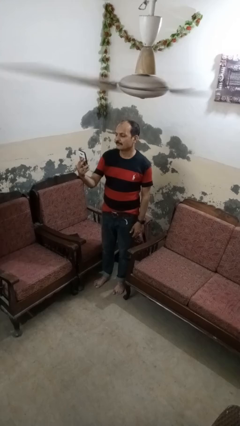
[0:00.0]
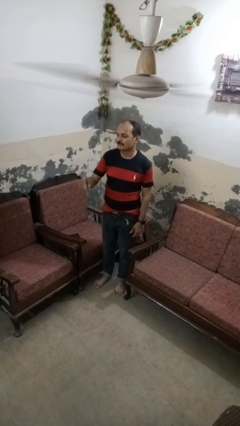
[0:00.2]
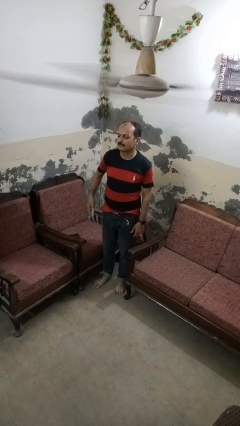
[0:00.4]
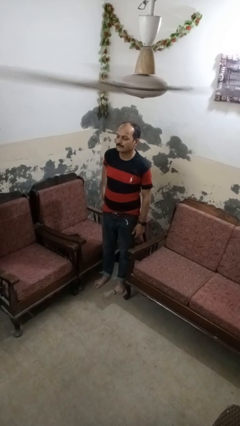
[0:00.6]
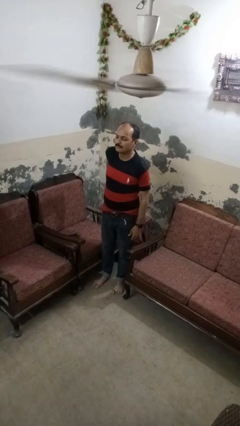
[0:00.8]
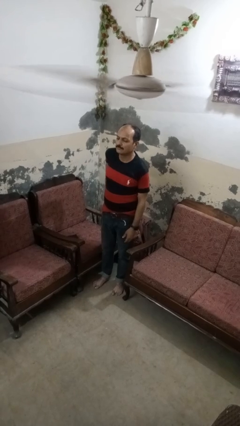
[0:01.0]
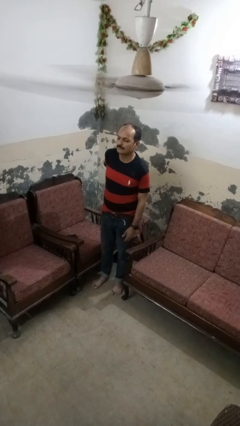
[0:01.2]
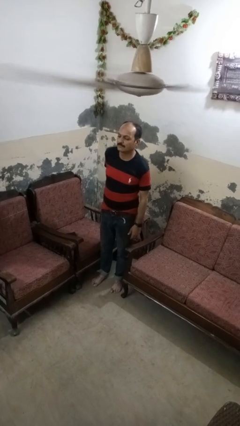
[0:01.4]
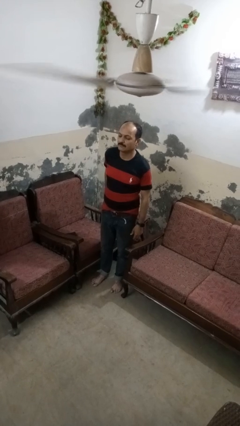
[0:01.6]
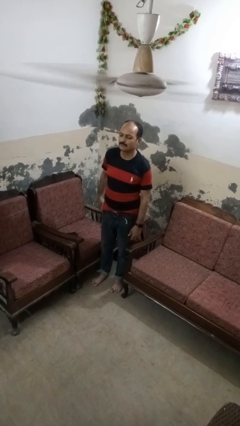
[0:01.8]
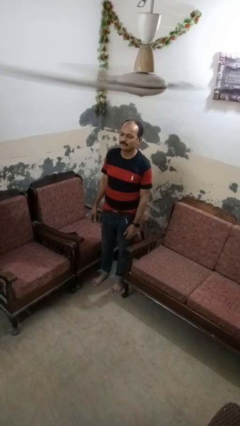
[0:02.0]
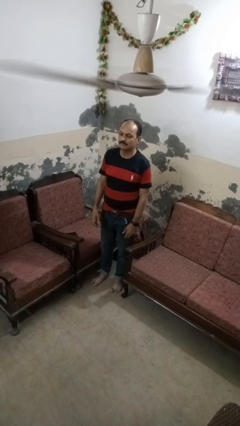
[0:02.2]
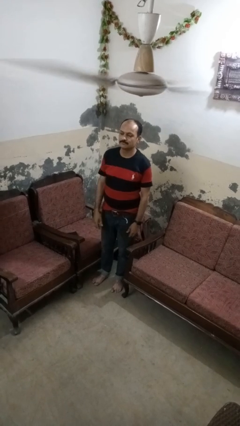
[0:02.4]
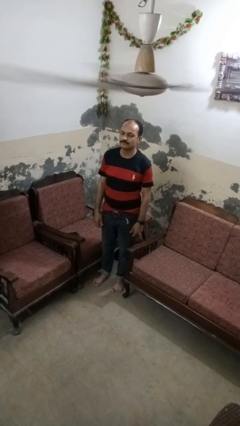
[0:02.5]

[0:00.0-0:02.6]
person puts phone into pocket

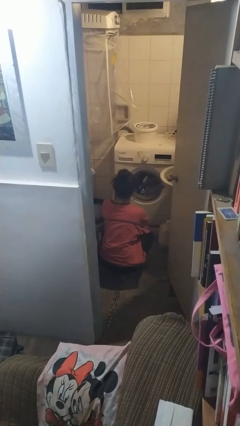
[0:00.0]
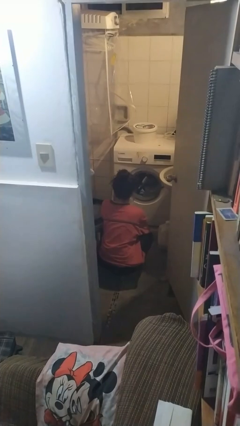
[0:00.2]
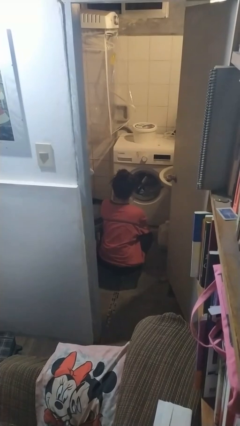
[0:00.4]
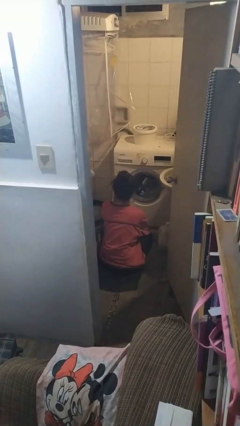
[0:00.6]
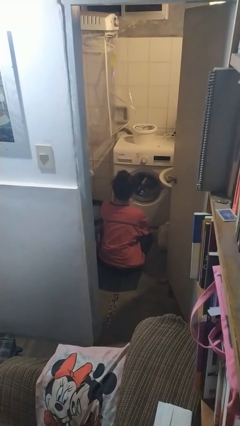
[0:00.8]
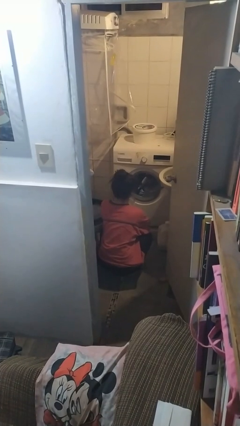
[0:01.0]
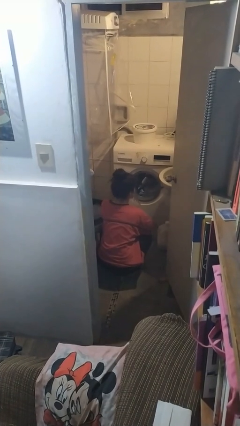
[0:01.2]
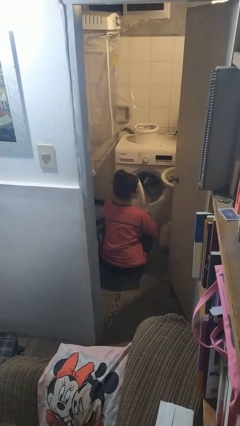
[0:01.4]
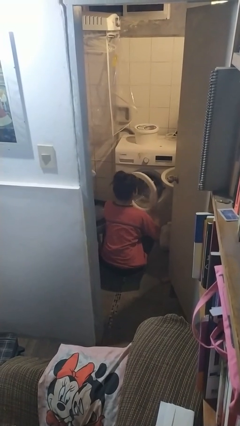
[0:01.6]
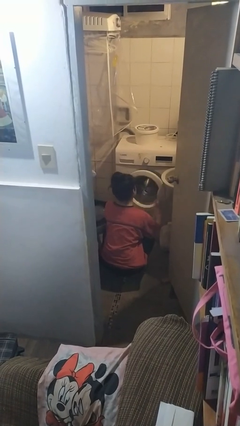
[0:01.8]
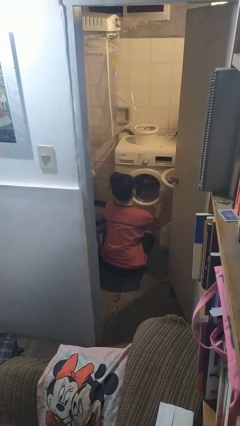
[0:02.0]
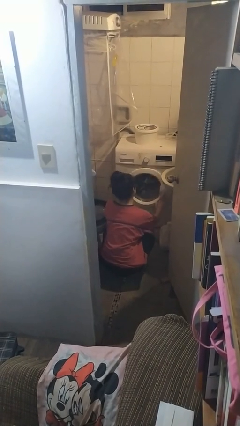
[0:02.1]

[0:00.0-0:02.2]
person closes clothes washer

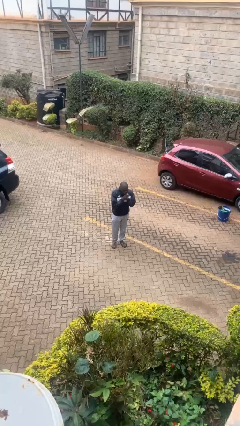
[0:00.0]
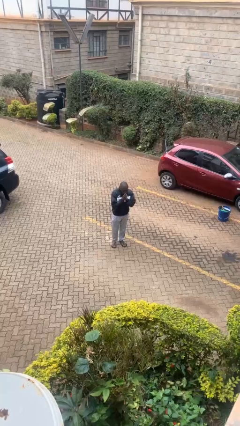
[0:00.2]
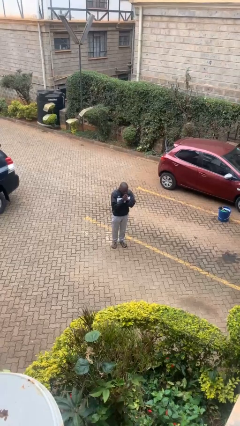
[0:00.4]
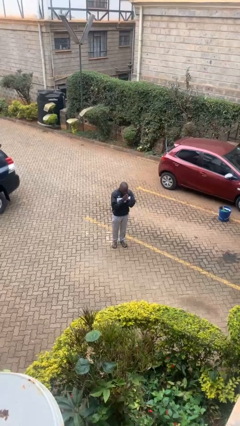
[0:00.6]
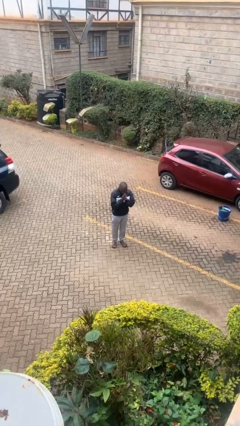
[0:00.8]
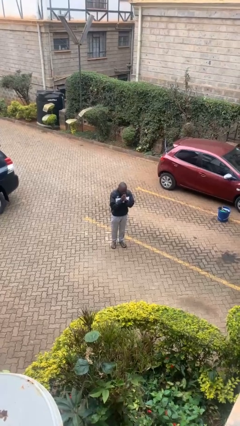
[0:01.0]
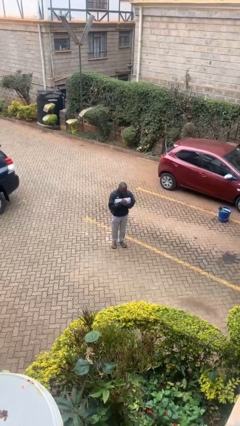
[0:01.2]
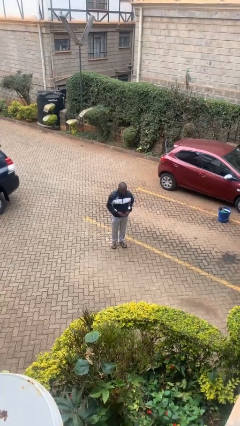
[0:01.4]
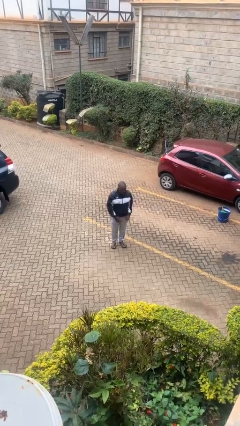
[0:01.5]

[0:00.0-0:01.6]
person blows into hands

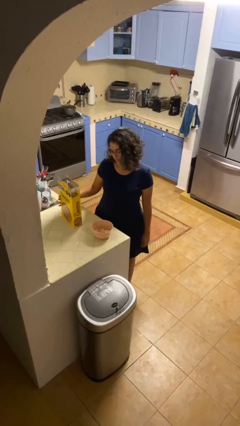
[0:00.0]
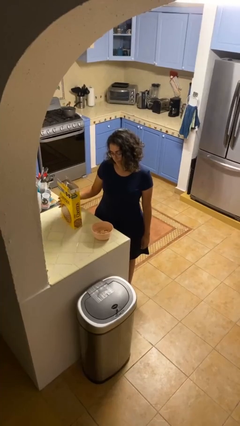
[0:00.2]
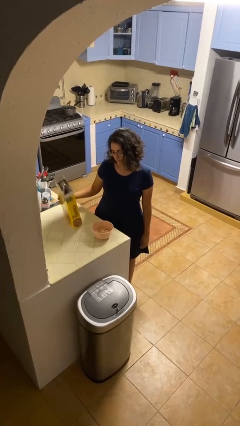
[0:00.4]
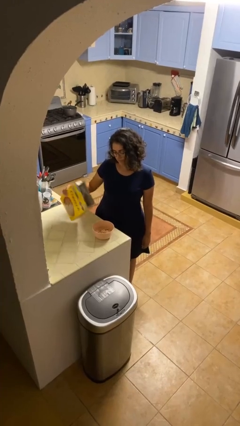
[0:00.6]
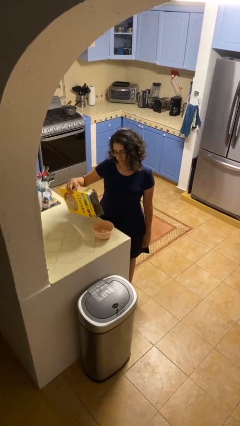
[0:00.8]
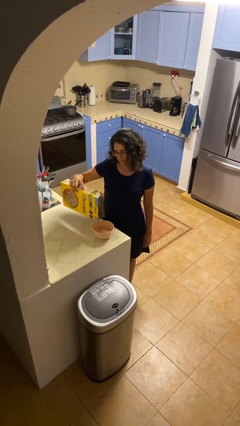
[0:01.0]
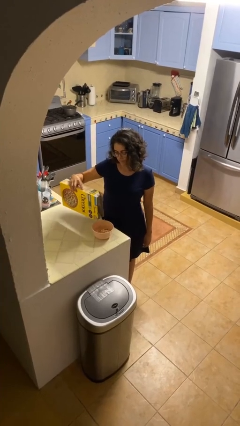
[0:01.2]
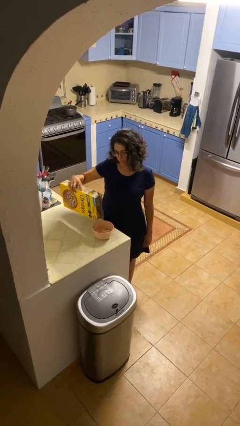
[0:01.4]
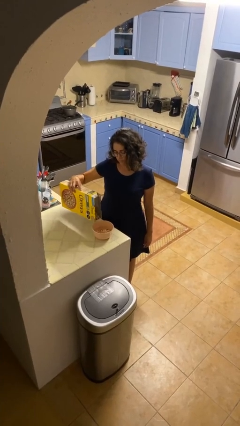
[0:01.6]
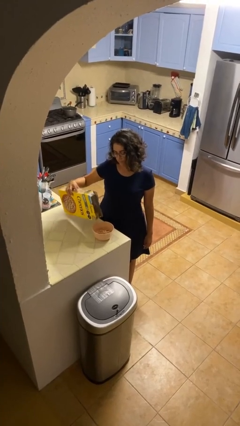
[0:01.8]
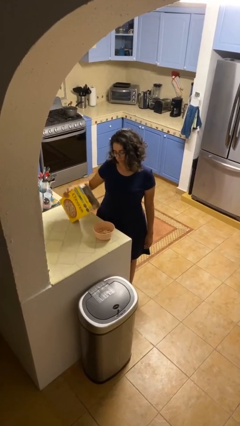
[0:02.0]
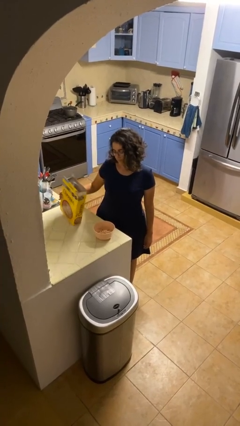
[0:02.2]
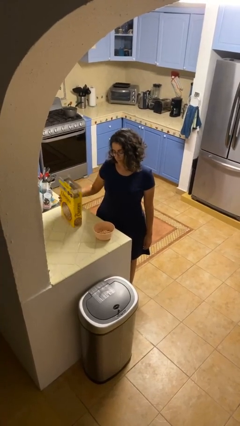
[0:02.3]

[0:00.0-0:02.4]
person pours into bowl

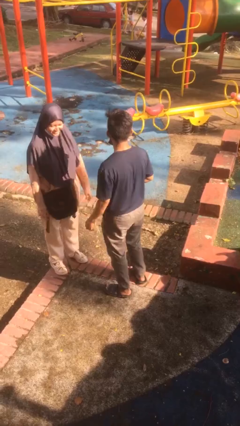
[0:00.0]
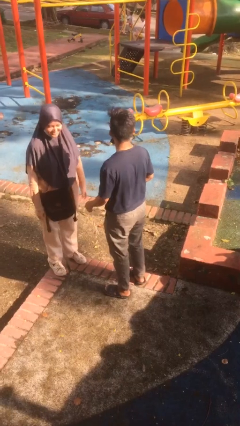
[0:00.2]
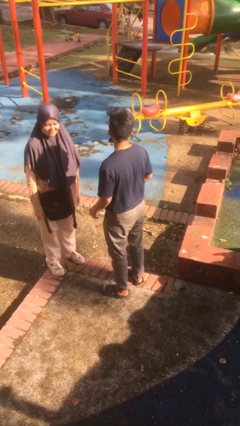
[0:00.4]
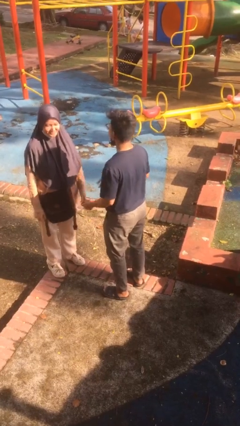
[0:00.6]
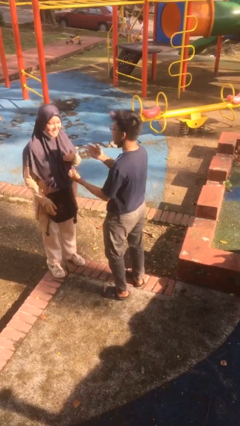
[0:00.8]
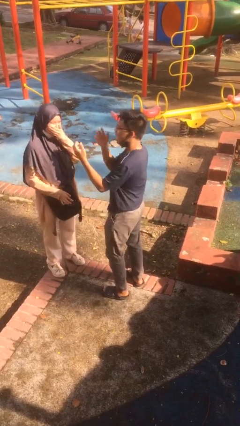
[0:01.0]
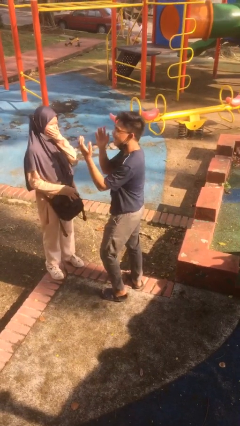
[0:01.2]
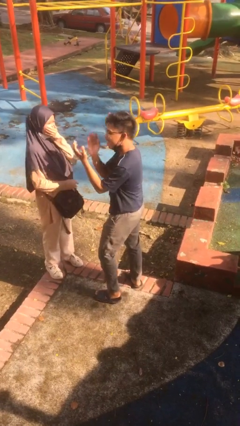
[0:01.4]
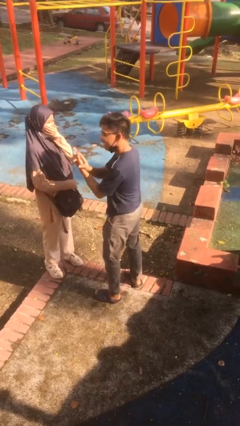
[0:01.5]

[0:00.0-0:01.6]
person laughs with person

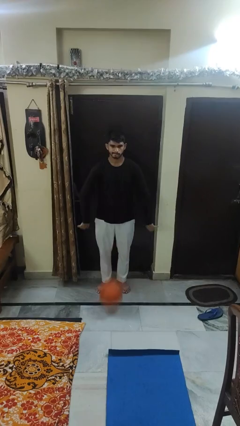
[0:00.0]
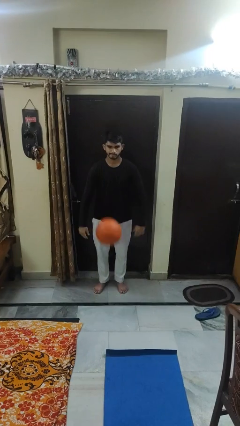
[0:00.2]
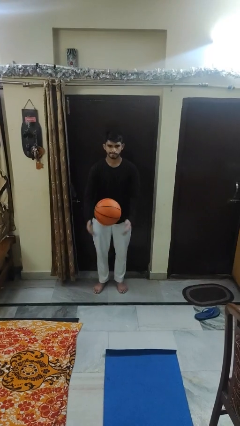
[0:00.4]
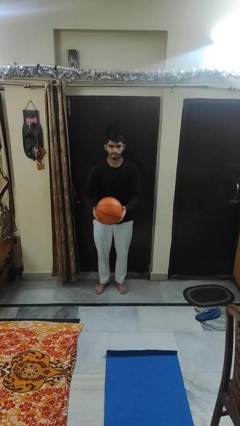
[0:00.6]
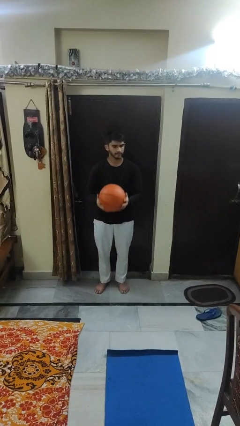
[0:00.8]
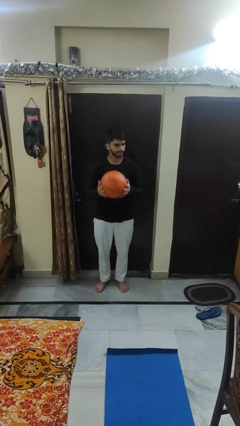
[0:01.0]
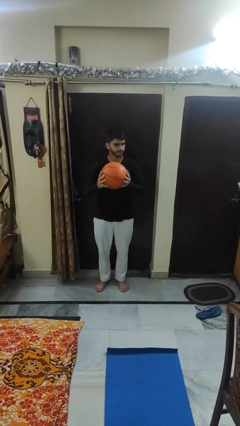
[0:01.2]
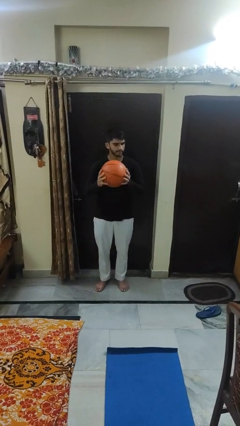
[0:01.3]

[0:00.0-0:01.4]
person bounces ball on floor

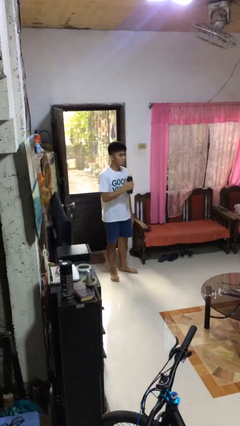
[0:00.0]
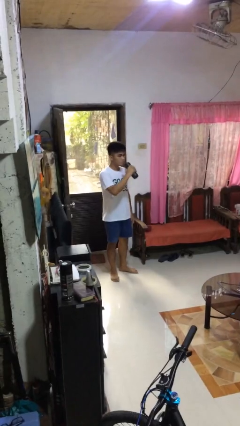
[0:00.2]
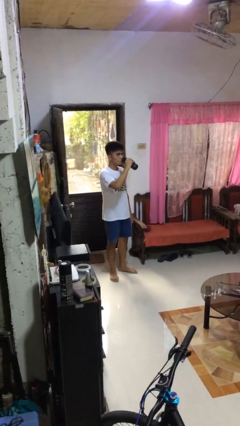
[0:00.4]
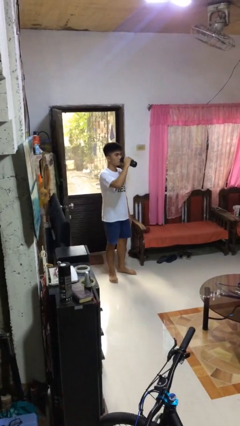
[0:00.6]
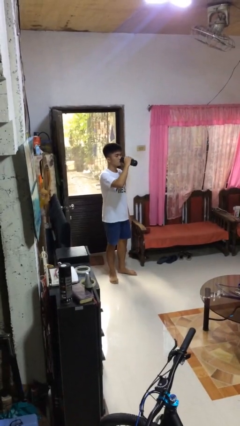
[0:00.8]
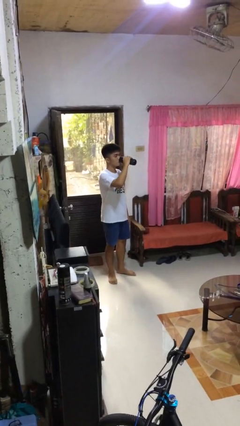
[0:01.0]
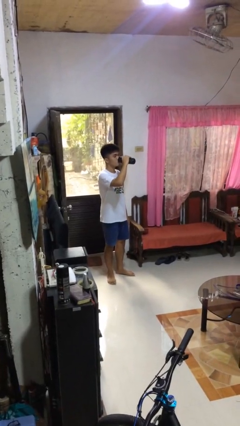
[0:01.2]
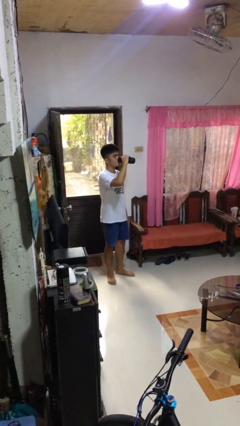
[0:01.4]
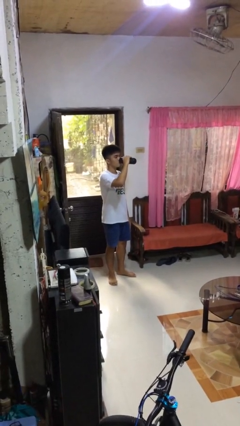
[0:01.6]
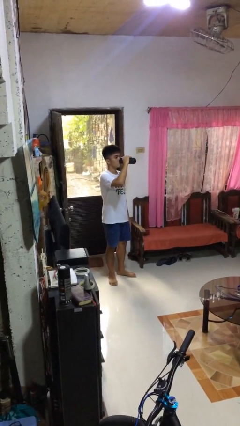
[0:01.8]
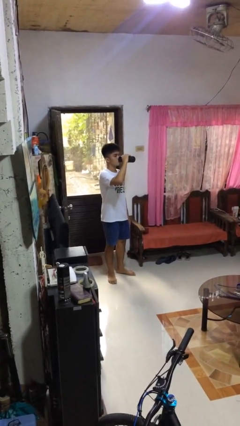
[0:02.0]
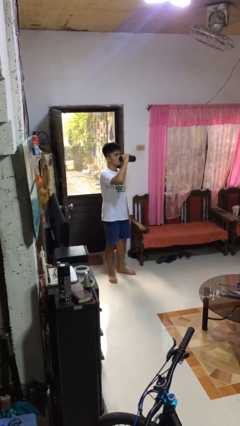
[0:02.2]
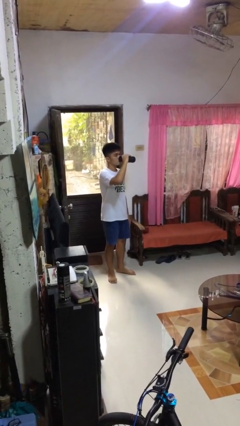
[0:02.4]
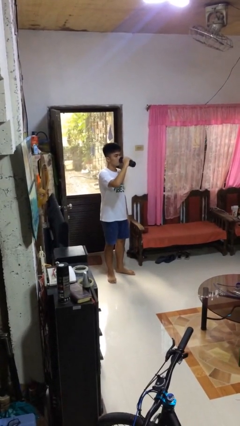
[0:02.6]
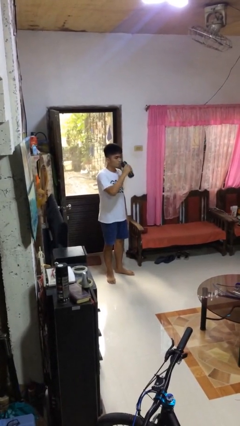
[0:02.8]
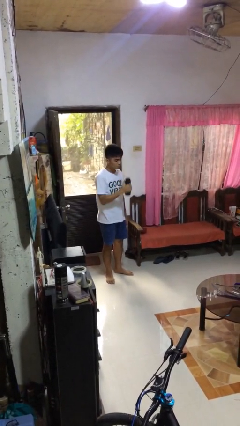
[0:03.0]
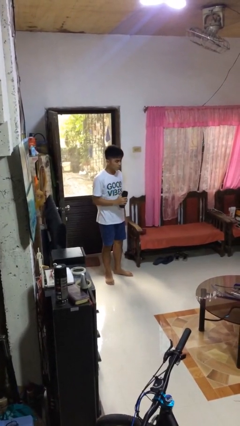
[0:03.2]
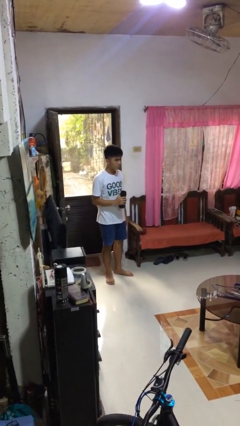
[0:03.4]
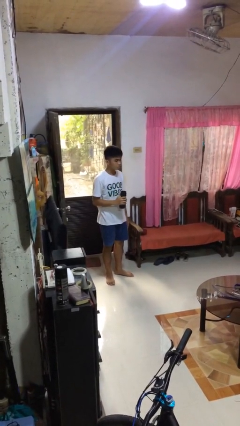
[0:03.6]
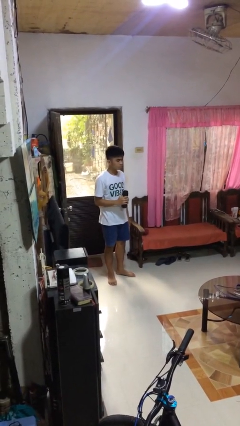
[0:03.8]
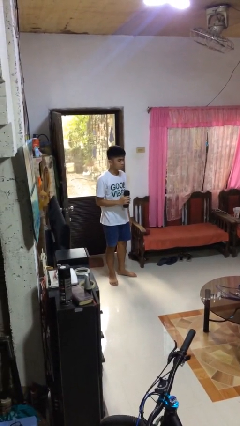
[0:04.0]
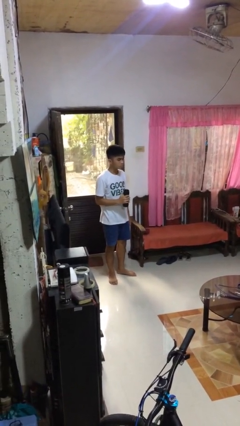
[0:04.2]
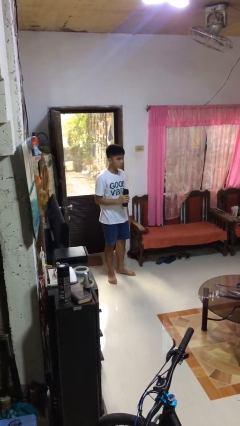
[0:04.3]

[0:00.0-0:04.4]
person drinks from bottle

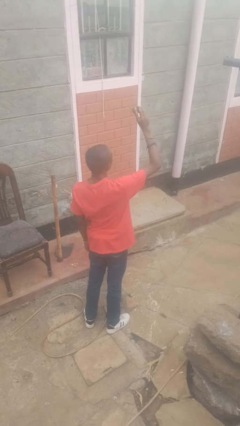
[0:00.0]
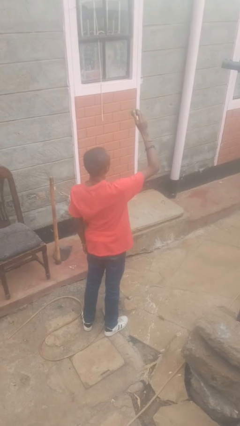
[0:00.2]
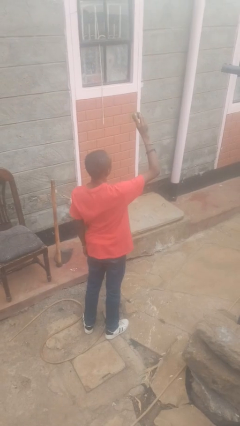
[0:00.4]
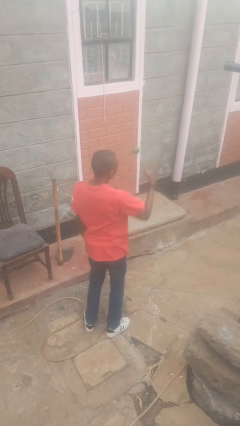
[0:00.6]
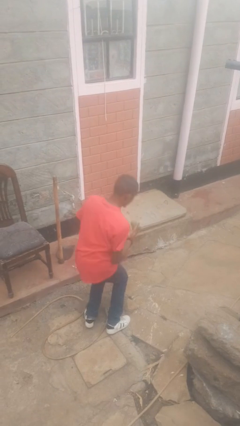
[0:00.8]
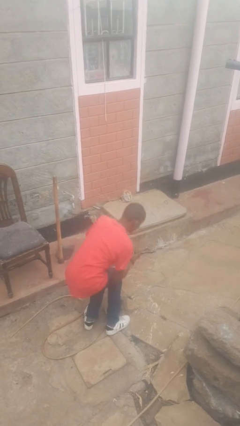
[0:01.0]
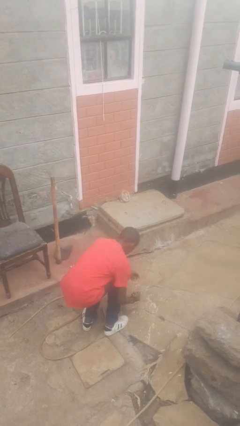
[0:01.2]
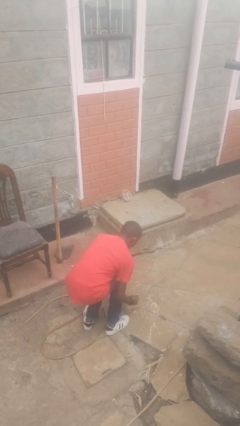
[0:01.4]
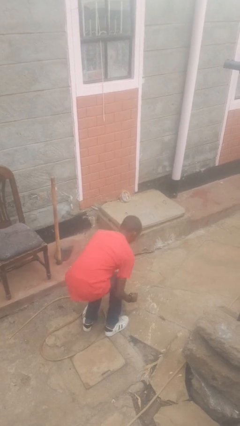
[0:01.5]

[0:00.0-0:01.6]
person drops object
